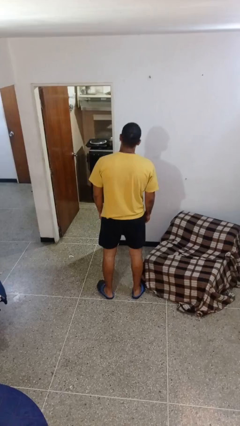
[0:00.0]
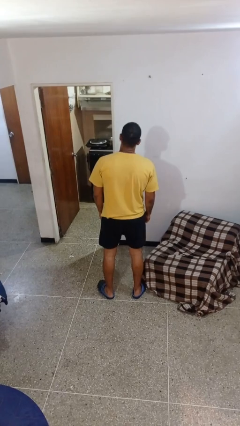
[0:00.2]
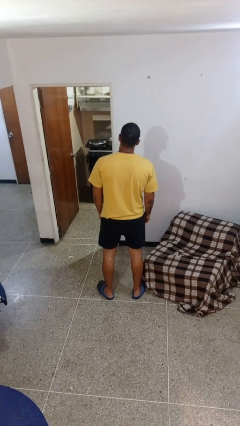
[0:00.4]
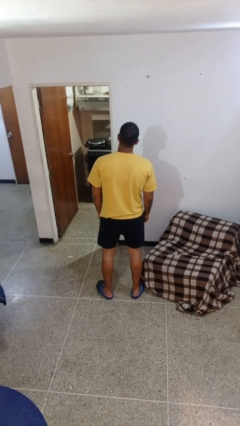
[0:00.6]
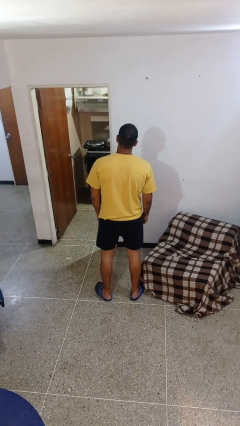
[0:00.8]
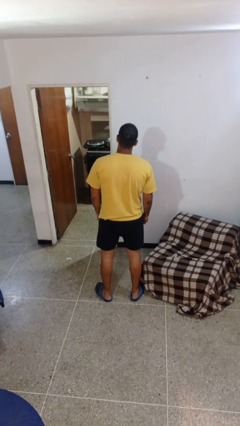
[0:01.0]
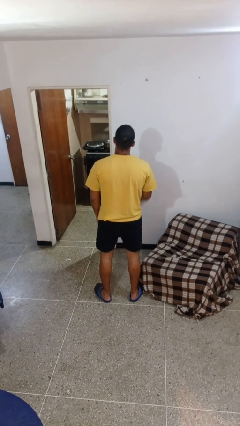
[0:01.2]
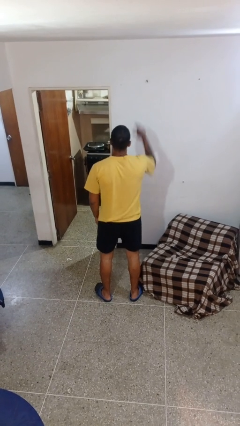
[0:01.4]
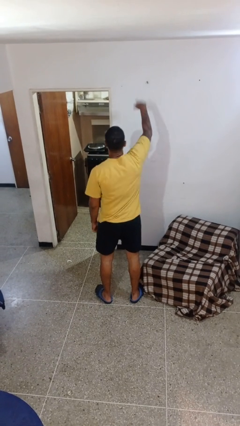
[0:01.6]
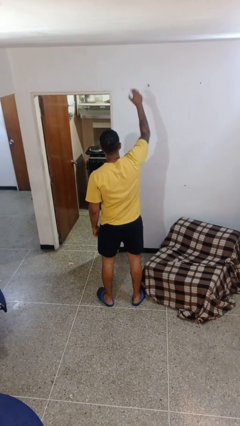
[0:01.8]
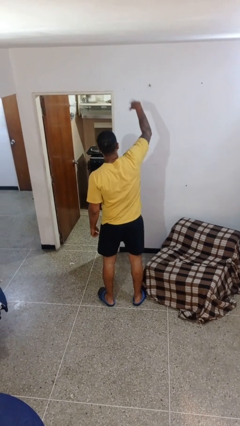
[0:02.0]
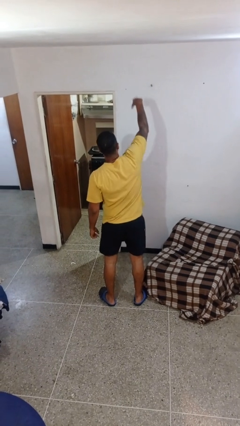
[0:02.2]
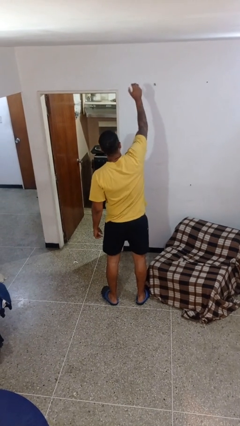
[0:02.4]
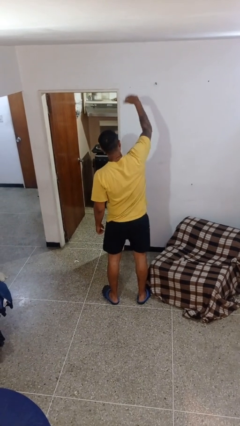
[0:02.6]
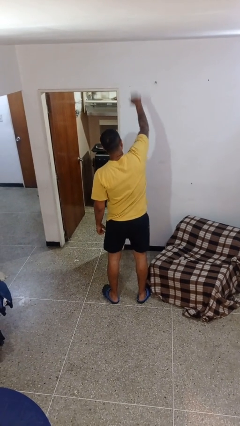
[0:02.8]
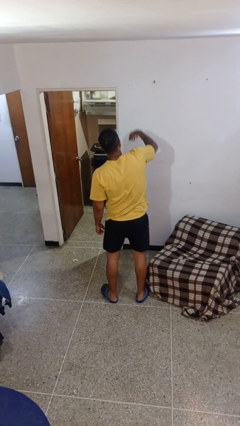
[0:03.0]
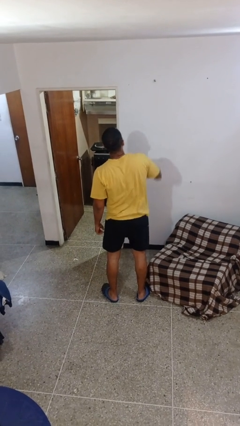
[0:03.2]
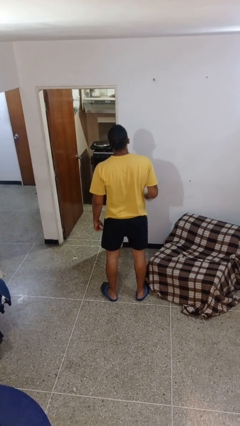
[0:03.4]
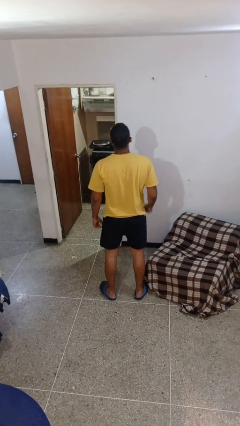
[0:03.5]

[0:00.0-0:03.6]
person gestures come here

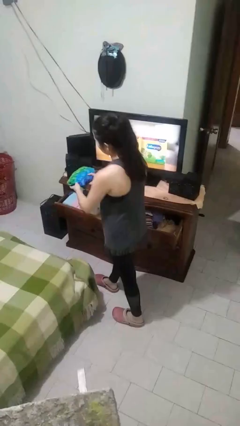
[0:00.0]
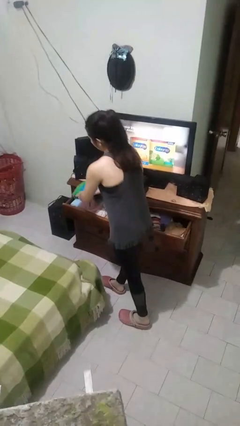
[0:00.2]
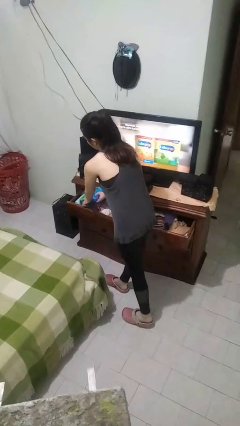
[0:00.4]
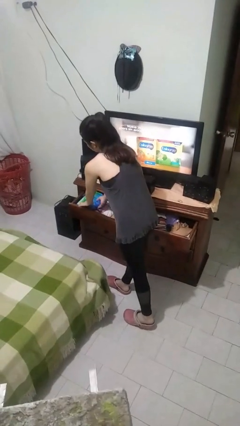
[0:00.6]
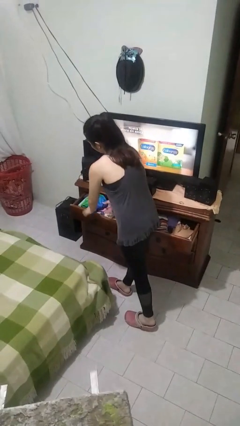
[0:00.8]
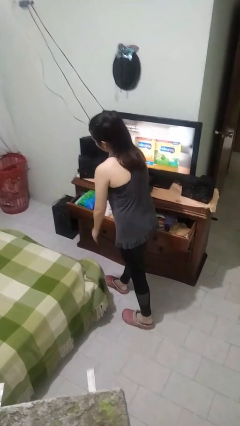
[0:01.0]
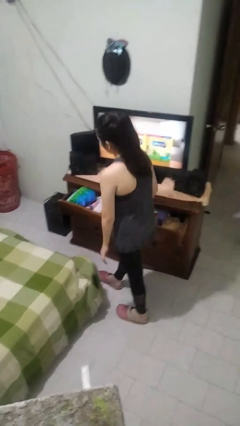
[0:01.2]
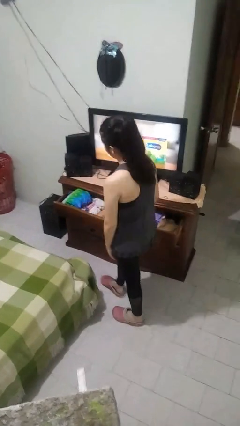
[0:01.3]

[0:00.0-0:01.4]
person puts clothes into dresser

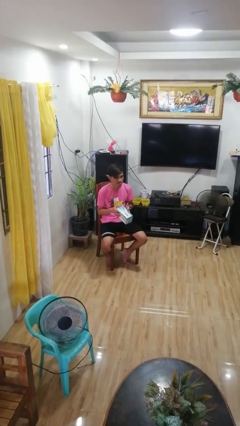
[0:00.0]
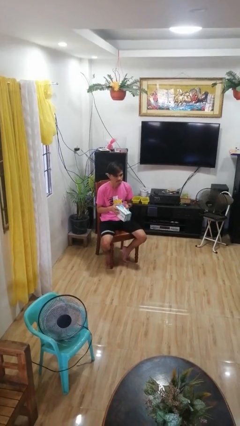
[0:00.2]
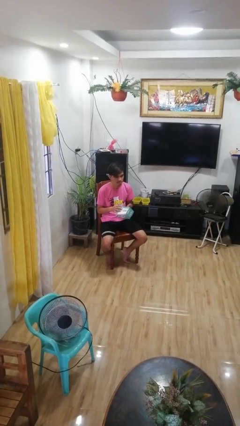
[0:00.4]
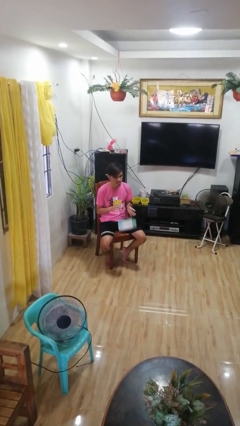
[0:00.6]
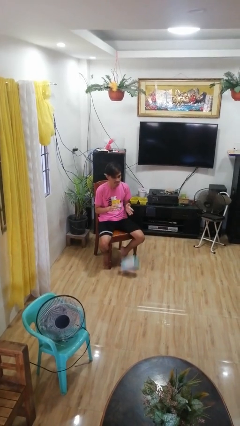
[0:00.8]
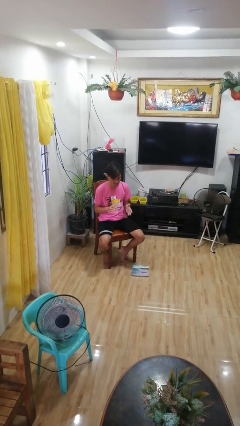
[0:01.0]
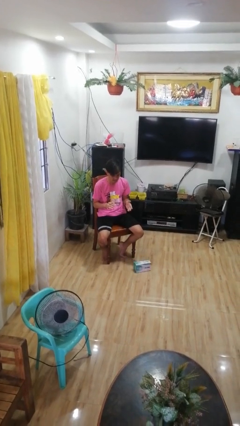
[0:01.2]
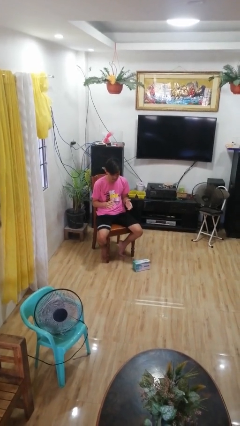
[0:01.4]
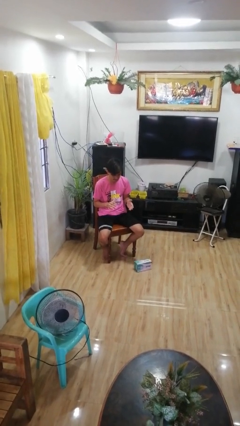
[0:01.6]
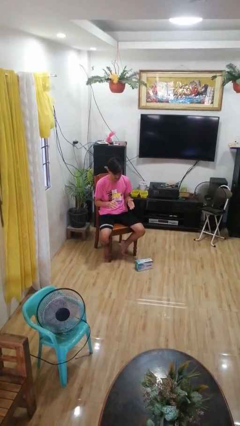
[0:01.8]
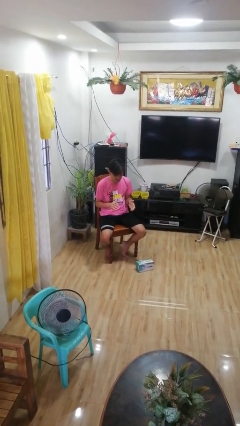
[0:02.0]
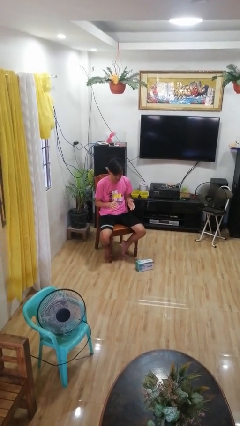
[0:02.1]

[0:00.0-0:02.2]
person drops object

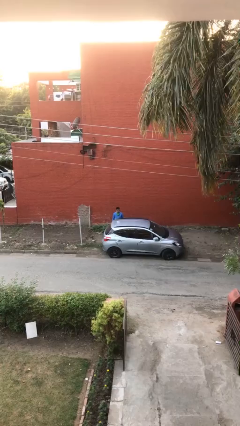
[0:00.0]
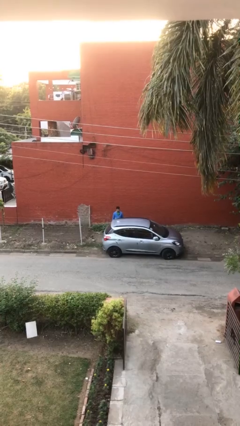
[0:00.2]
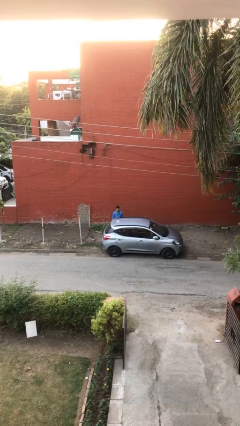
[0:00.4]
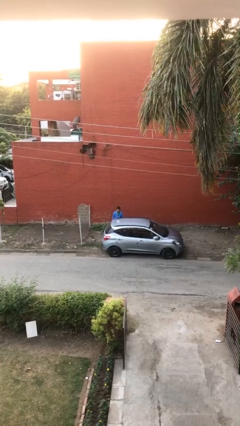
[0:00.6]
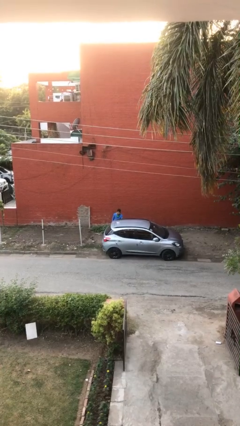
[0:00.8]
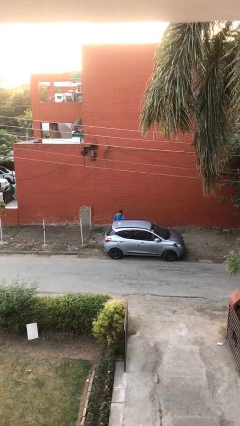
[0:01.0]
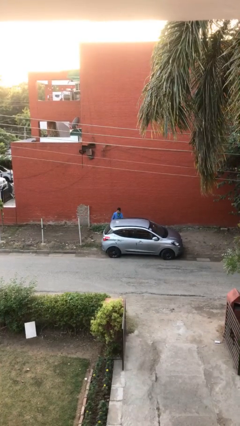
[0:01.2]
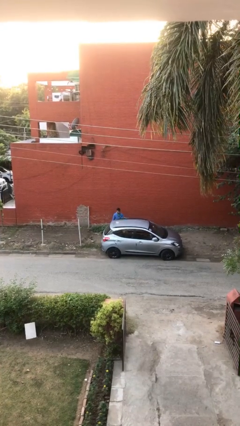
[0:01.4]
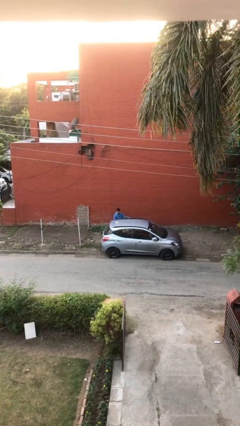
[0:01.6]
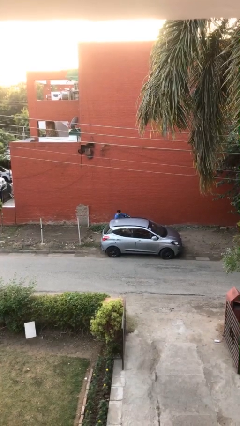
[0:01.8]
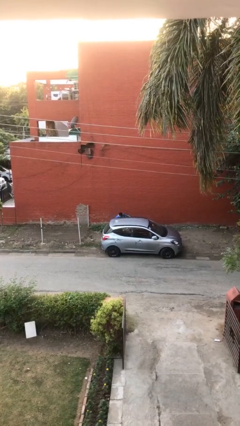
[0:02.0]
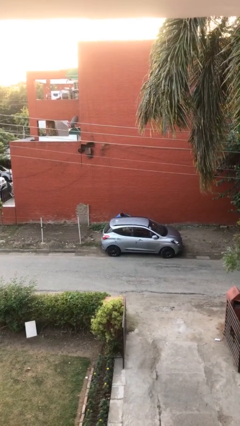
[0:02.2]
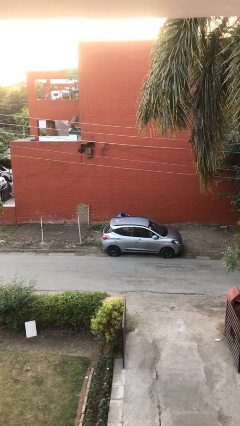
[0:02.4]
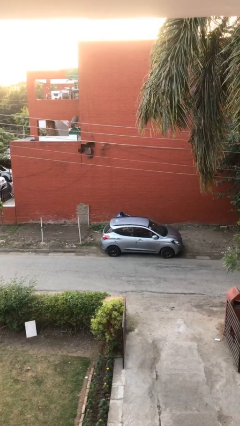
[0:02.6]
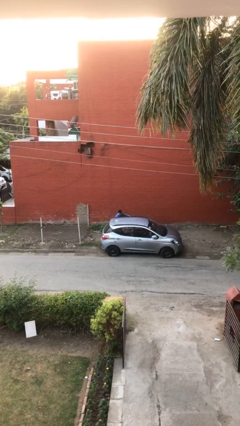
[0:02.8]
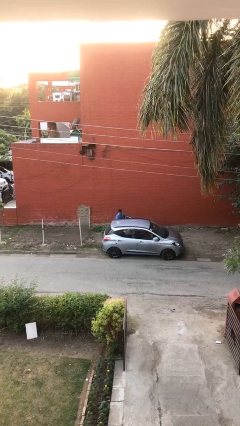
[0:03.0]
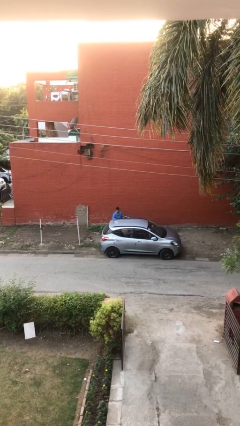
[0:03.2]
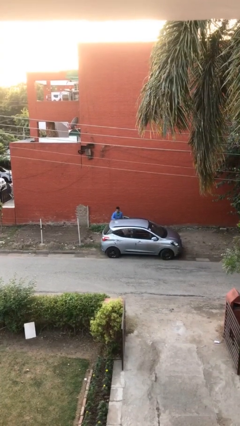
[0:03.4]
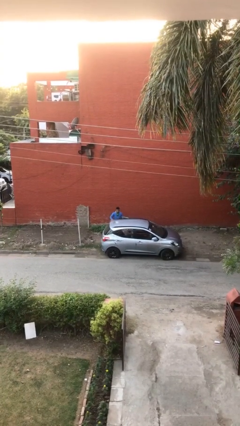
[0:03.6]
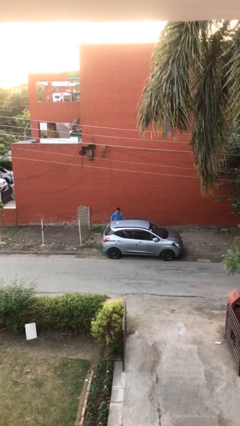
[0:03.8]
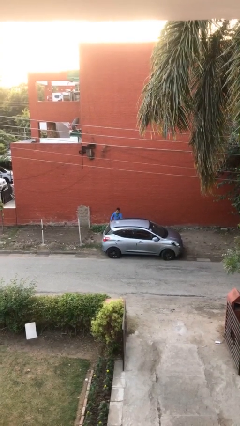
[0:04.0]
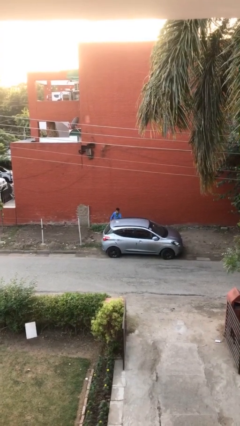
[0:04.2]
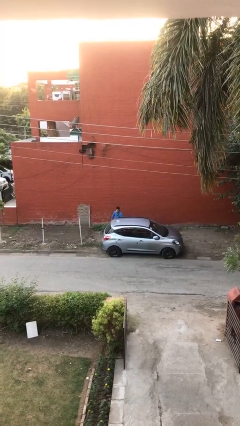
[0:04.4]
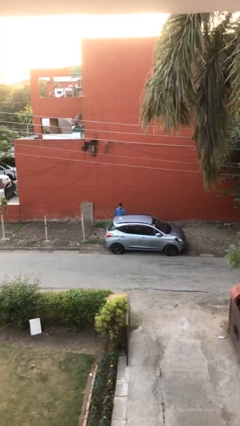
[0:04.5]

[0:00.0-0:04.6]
person unloads car

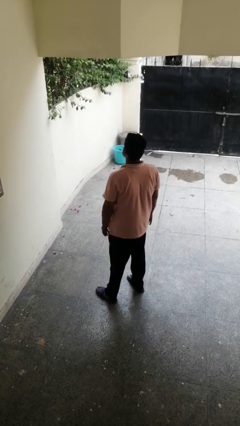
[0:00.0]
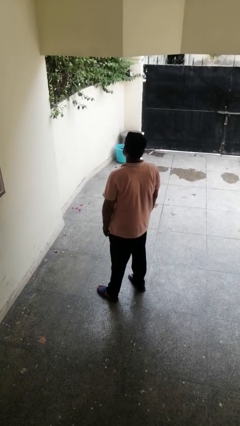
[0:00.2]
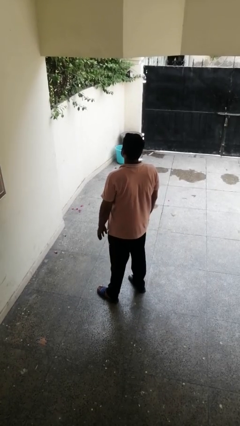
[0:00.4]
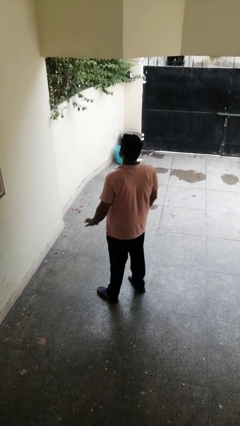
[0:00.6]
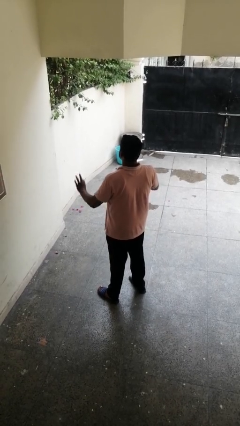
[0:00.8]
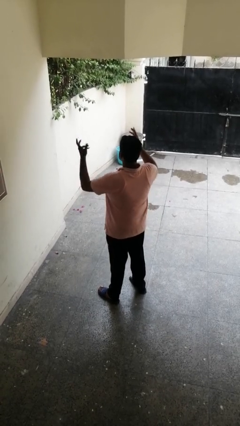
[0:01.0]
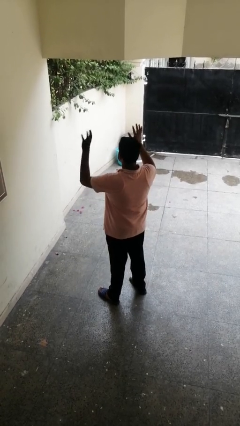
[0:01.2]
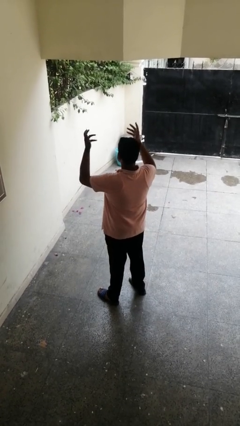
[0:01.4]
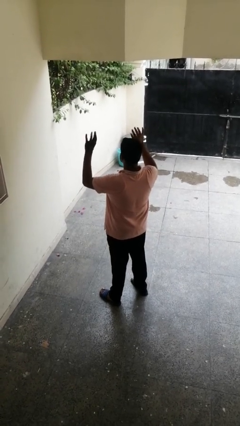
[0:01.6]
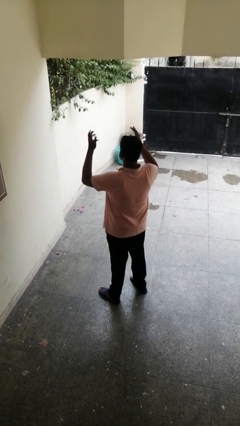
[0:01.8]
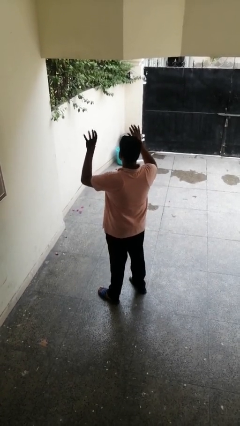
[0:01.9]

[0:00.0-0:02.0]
person dances in place

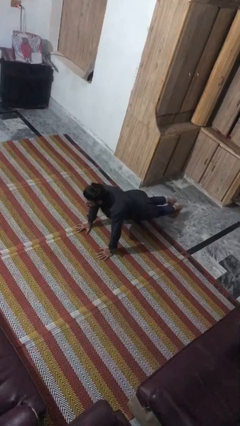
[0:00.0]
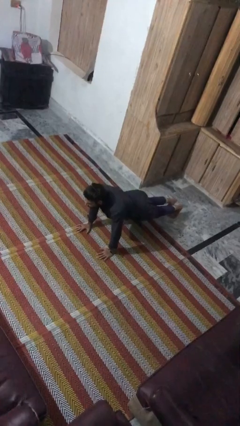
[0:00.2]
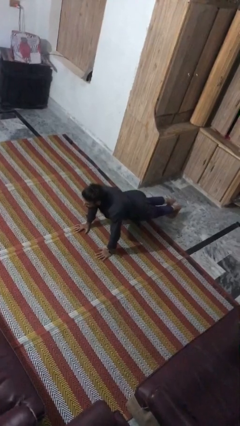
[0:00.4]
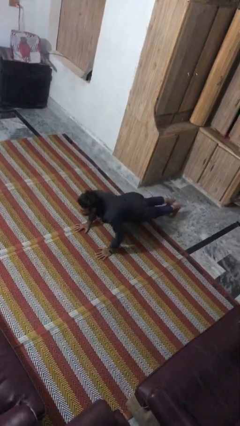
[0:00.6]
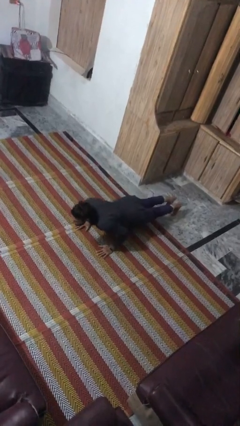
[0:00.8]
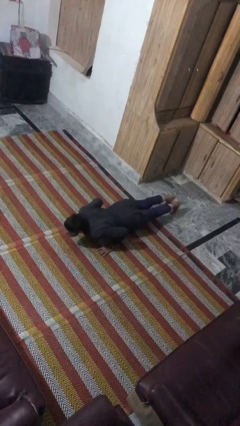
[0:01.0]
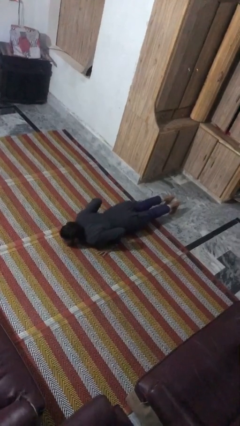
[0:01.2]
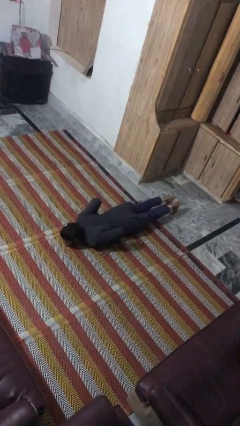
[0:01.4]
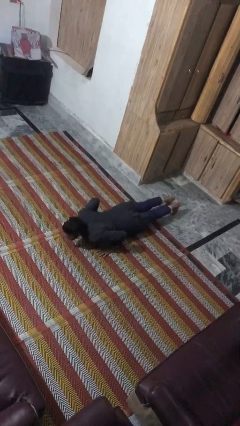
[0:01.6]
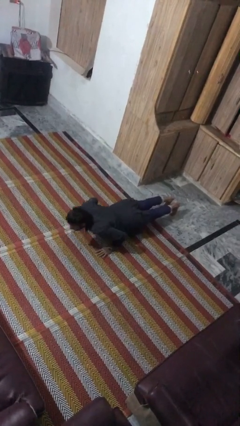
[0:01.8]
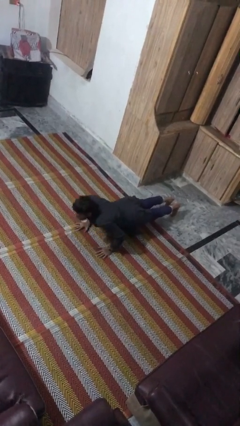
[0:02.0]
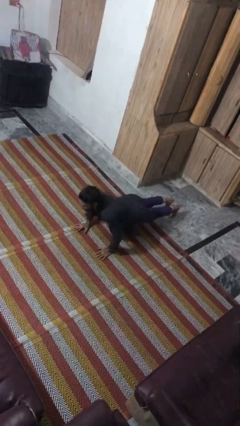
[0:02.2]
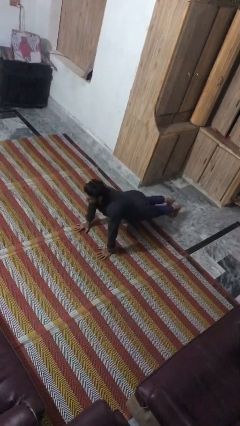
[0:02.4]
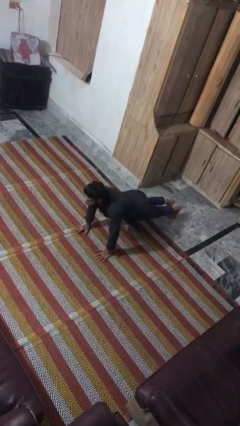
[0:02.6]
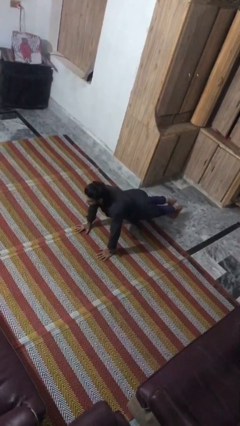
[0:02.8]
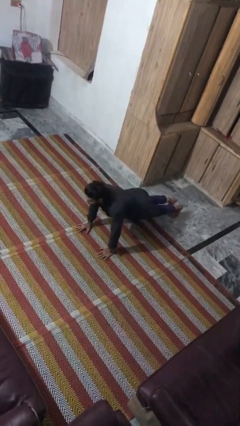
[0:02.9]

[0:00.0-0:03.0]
person exercises with pushup

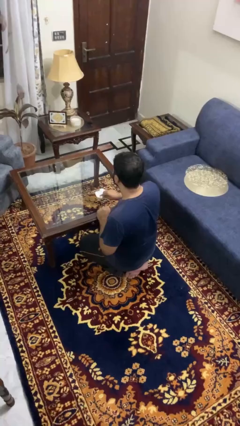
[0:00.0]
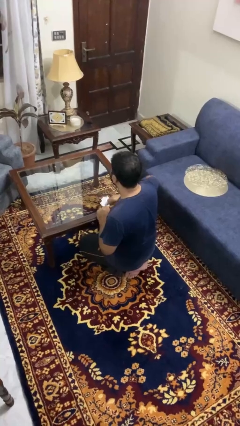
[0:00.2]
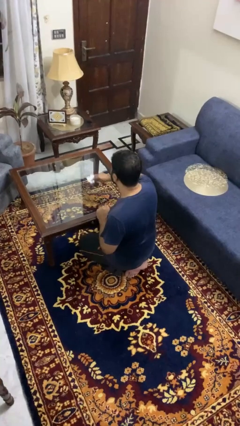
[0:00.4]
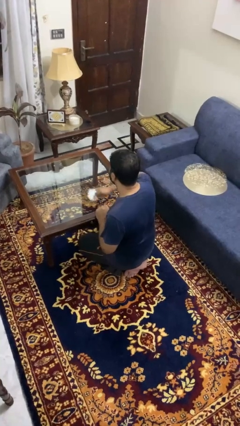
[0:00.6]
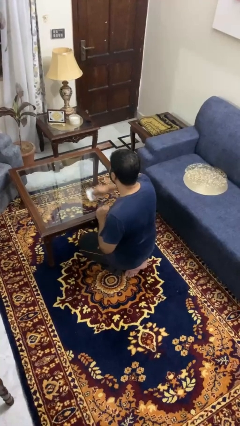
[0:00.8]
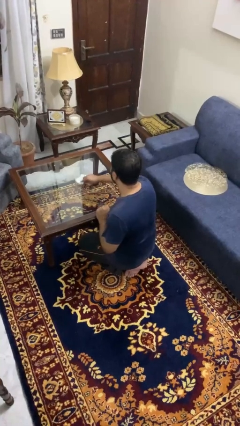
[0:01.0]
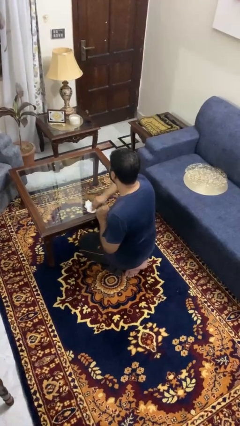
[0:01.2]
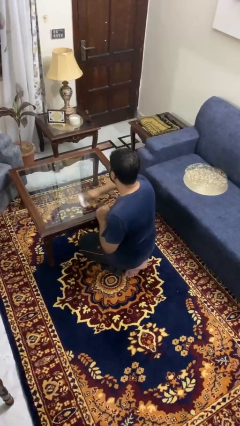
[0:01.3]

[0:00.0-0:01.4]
person cleans table with rag
